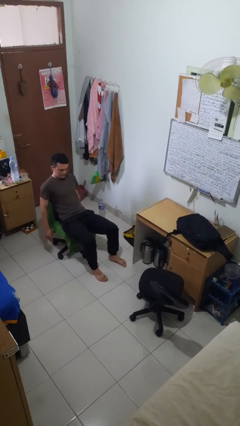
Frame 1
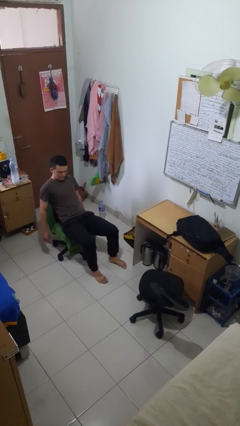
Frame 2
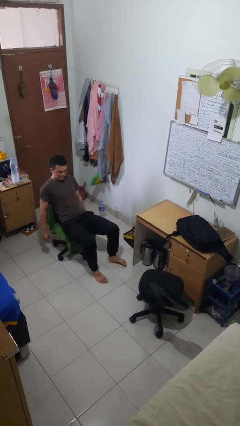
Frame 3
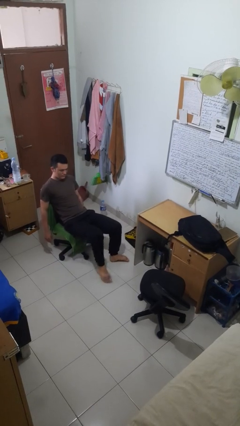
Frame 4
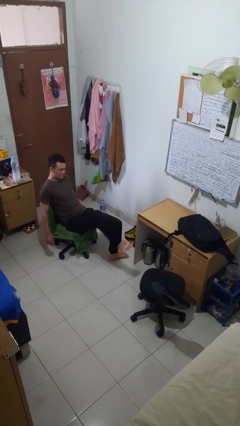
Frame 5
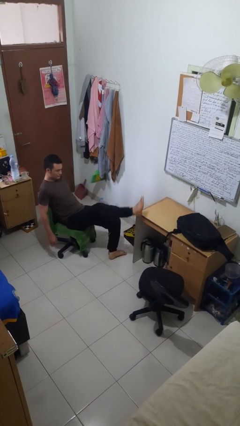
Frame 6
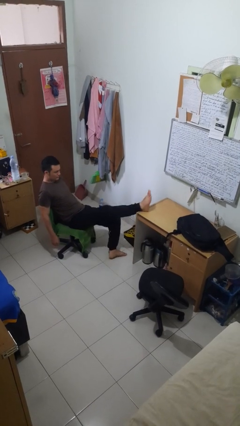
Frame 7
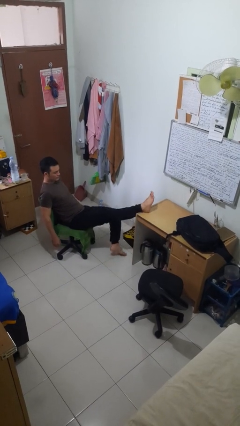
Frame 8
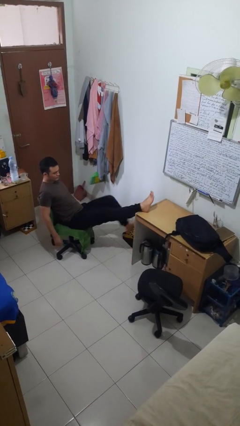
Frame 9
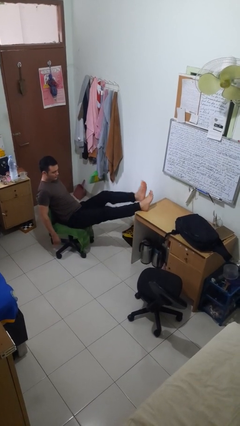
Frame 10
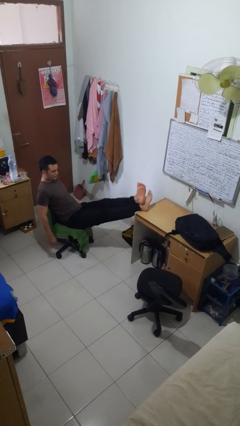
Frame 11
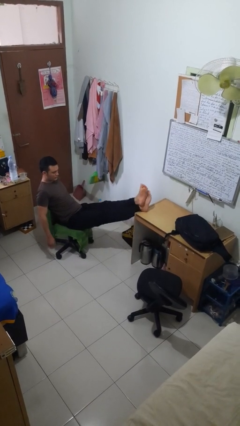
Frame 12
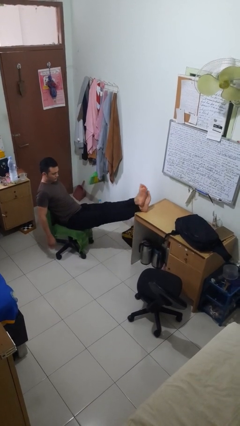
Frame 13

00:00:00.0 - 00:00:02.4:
person puts feet up

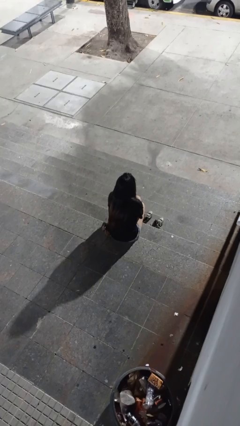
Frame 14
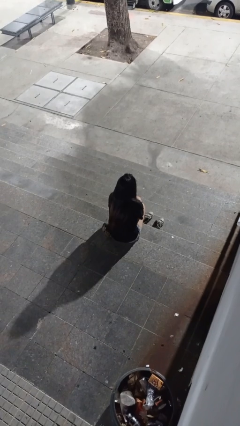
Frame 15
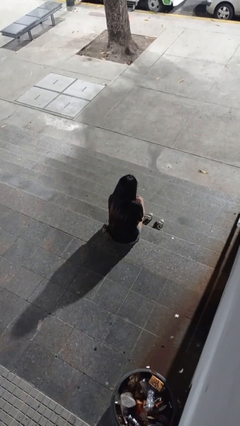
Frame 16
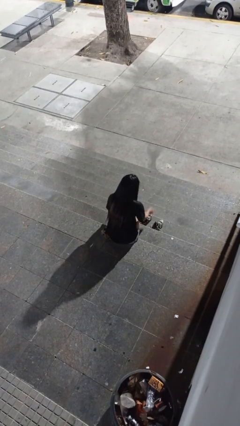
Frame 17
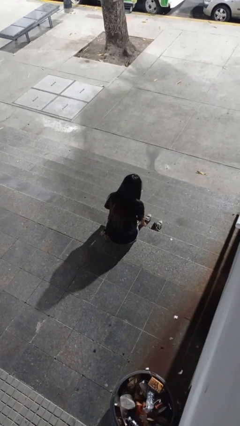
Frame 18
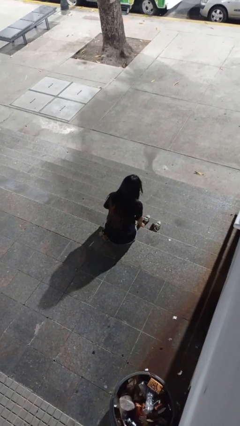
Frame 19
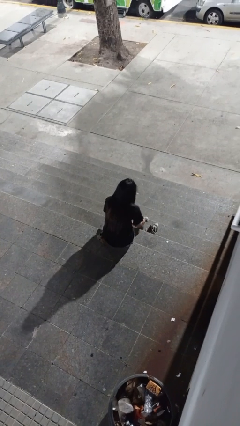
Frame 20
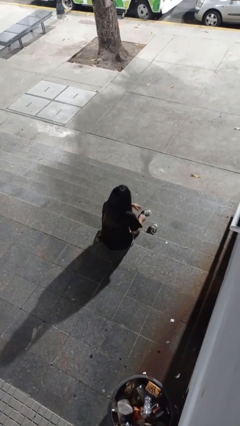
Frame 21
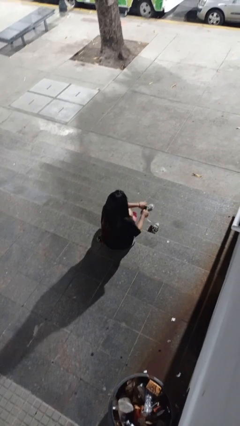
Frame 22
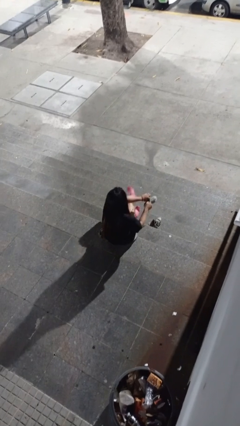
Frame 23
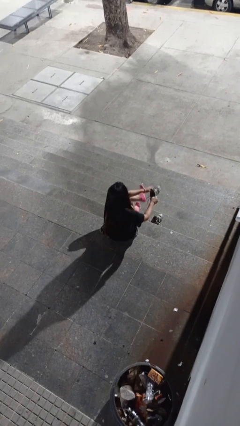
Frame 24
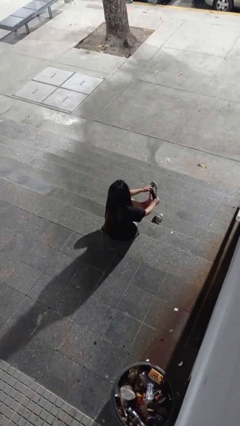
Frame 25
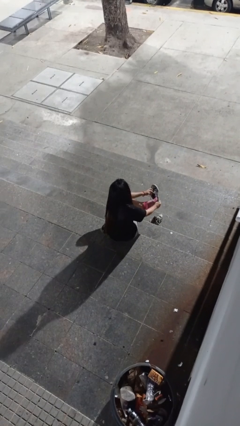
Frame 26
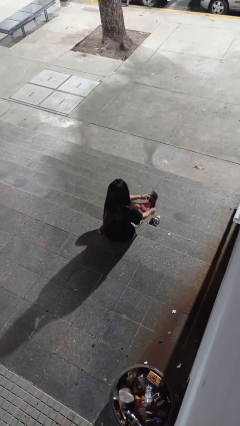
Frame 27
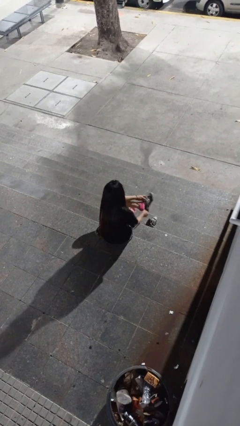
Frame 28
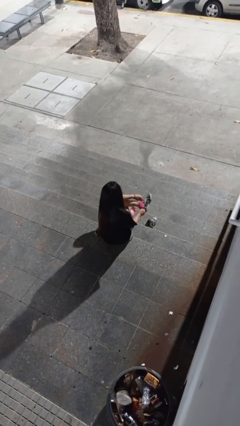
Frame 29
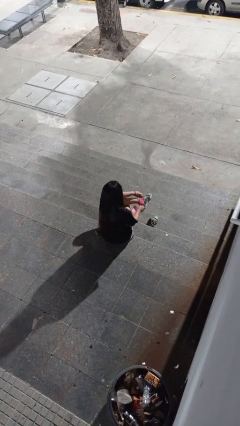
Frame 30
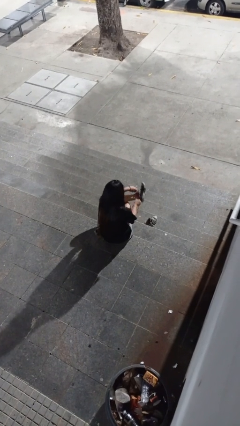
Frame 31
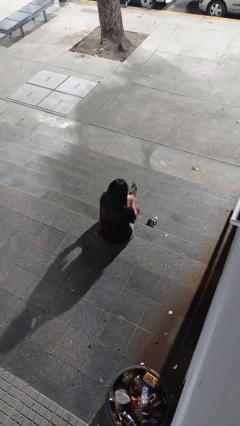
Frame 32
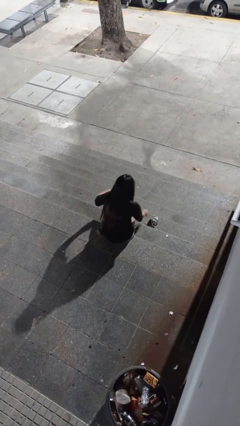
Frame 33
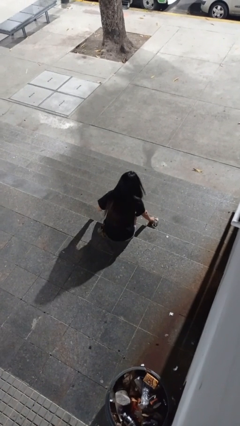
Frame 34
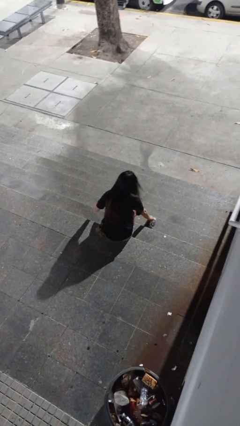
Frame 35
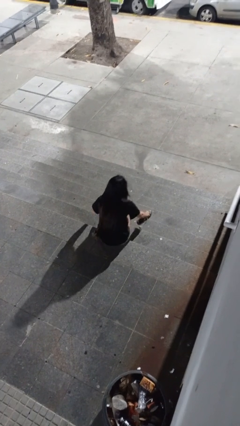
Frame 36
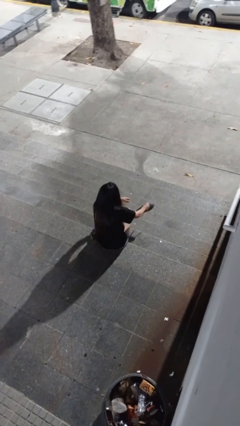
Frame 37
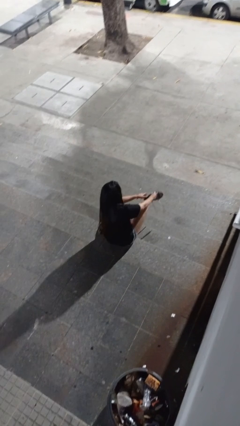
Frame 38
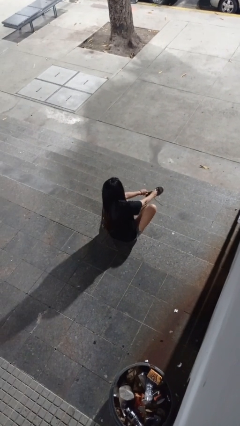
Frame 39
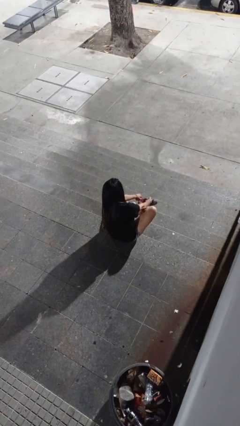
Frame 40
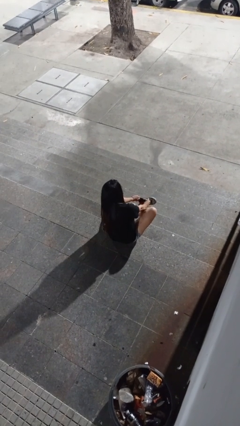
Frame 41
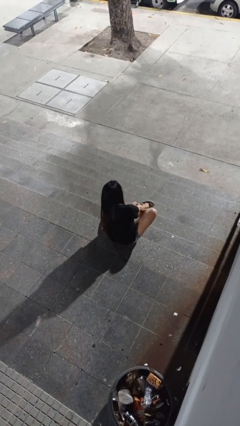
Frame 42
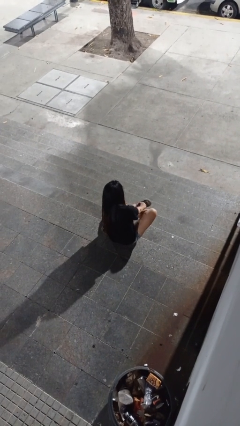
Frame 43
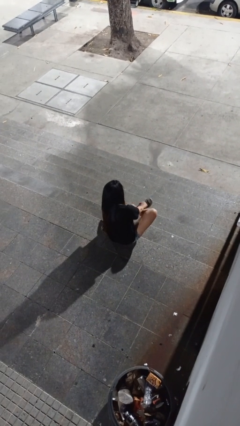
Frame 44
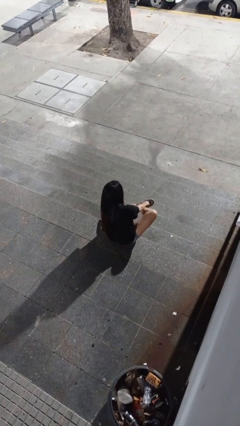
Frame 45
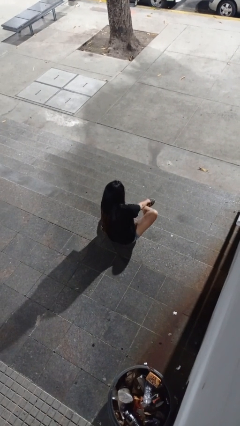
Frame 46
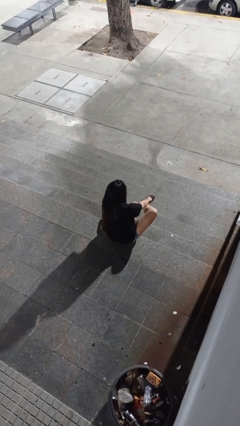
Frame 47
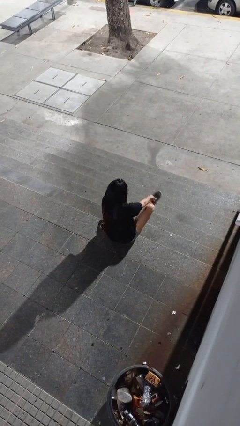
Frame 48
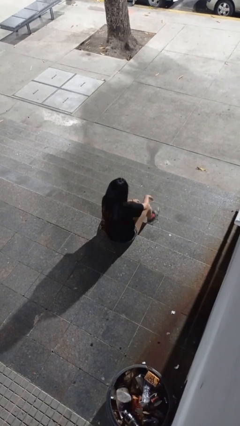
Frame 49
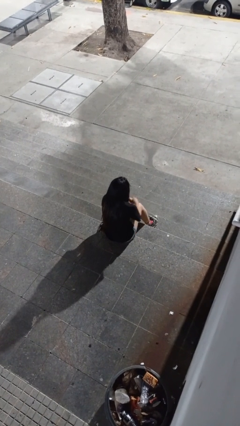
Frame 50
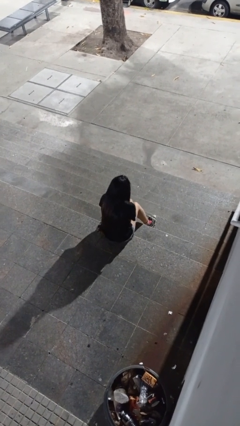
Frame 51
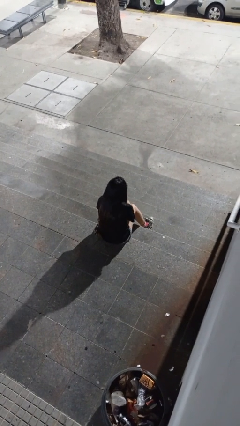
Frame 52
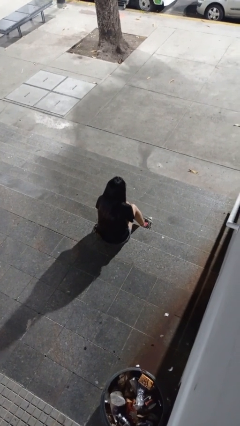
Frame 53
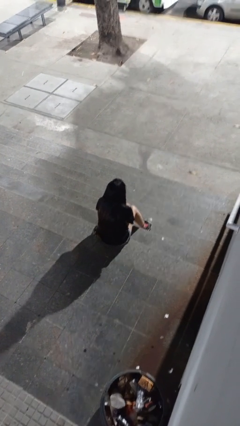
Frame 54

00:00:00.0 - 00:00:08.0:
person puts on shoes

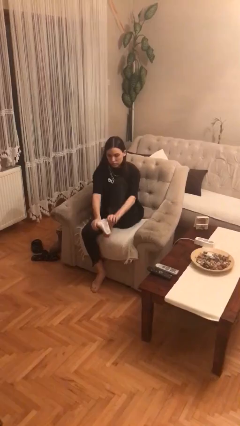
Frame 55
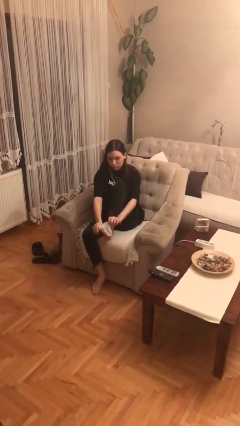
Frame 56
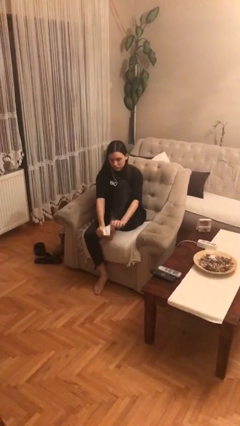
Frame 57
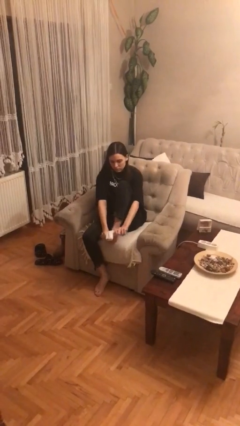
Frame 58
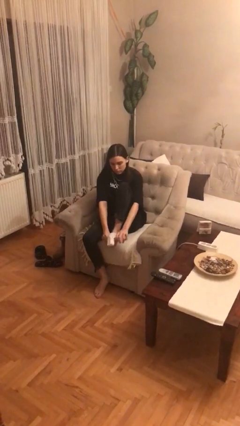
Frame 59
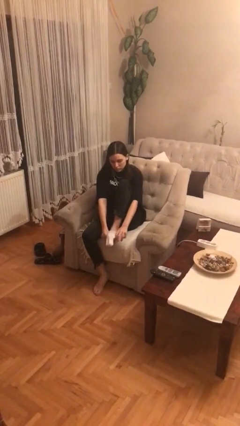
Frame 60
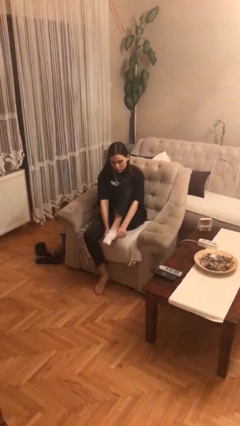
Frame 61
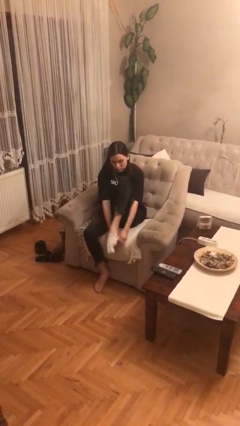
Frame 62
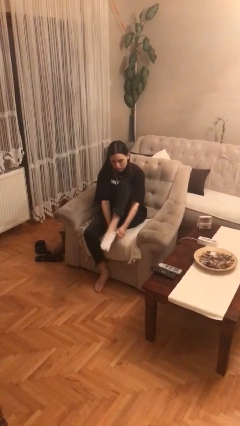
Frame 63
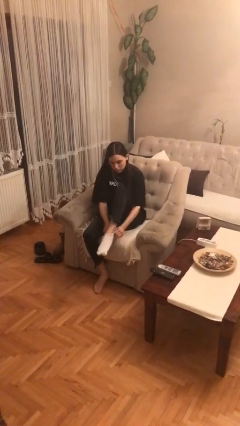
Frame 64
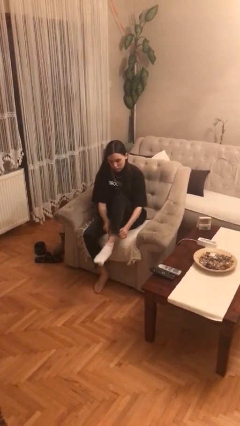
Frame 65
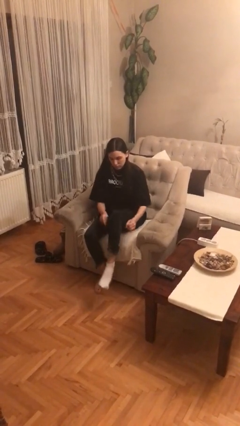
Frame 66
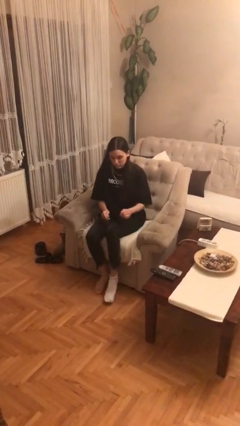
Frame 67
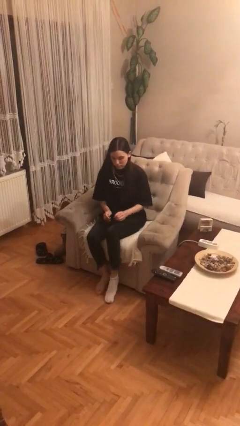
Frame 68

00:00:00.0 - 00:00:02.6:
person puts on socks

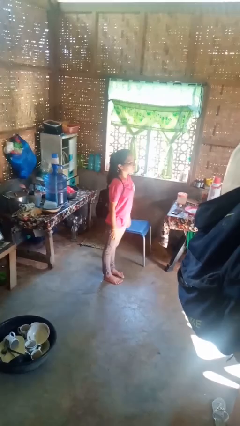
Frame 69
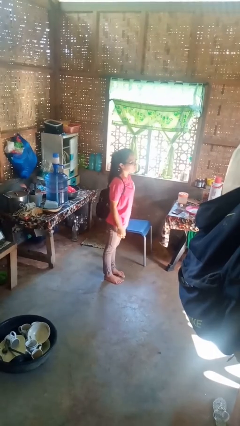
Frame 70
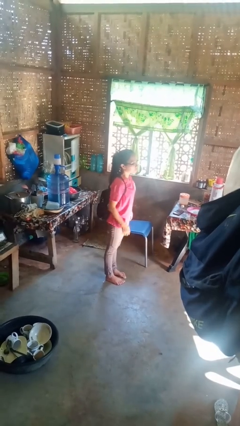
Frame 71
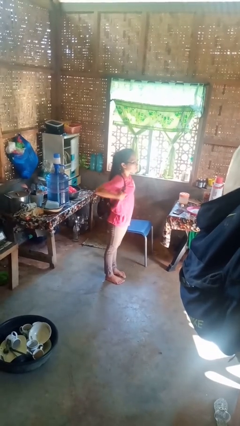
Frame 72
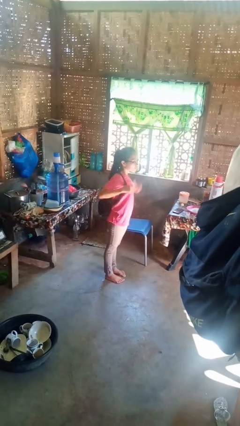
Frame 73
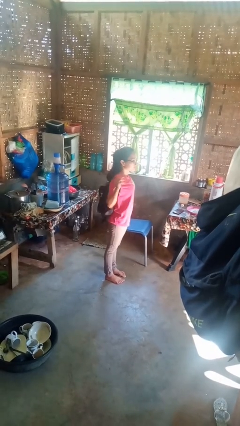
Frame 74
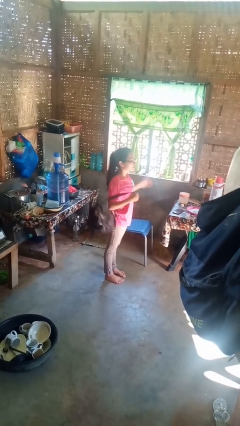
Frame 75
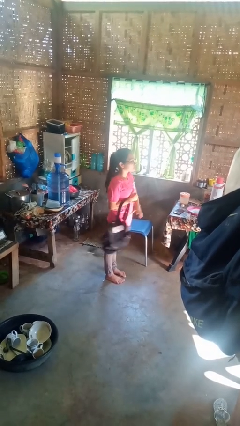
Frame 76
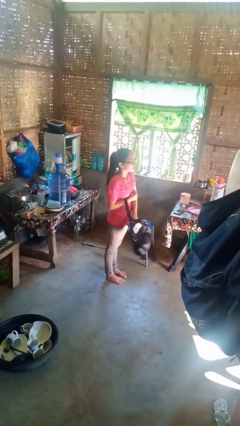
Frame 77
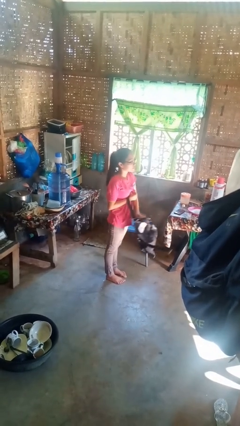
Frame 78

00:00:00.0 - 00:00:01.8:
person takes off backpack

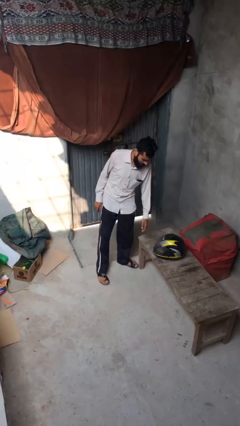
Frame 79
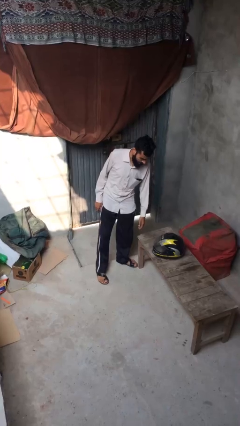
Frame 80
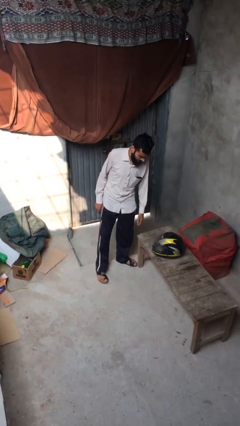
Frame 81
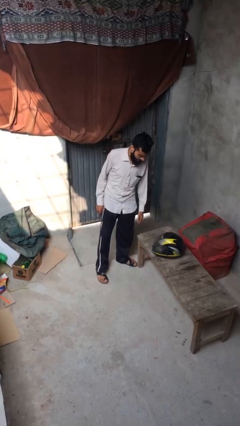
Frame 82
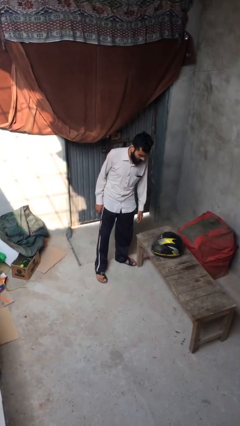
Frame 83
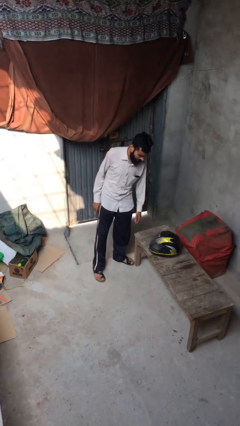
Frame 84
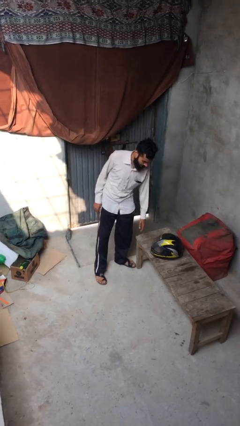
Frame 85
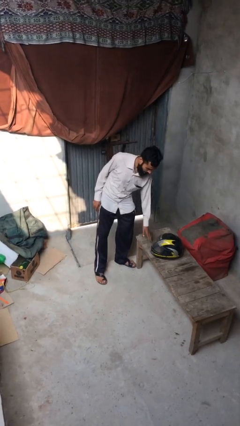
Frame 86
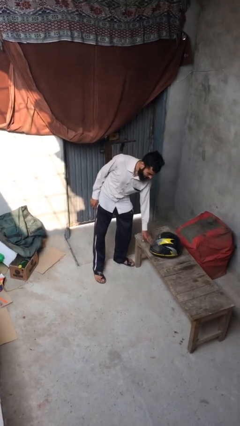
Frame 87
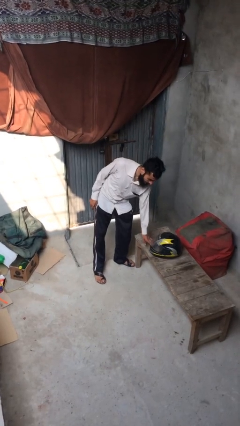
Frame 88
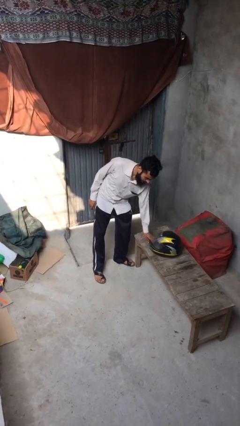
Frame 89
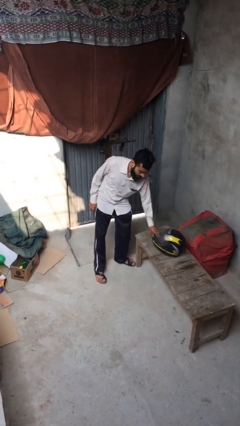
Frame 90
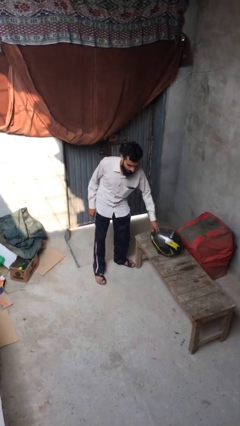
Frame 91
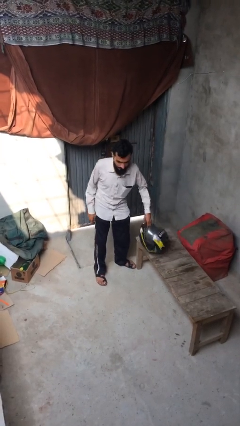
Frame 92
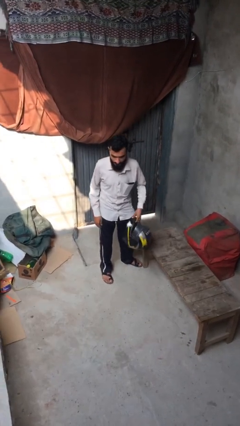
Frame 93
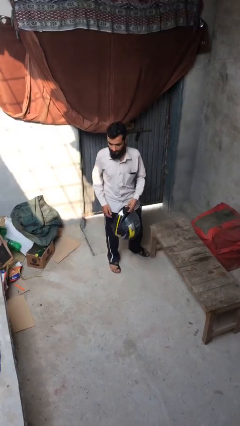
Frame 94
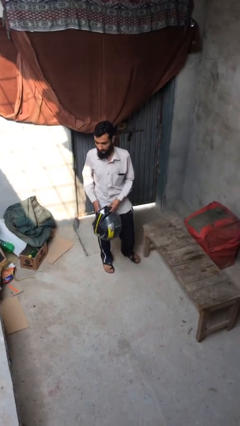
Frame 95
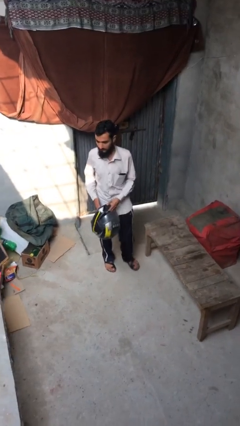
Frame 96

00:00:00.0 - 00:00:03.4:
person picks up object from table
